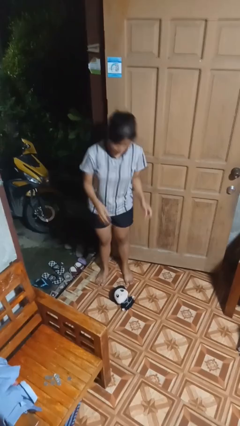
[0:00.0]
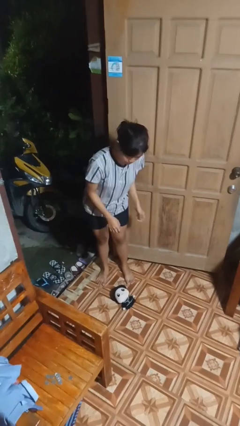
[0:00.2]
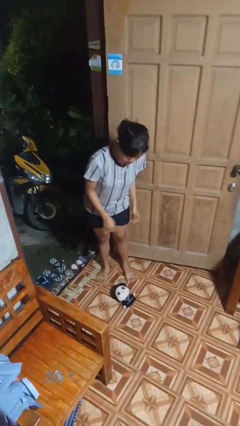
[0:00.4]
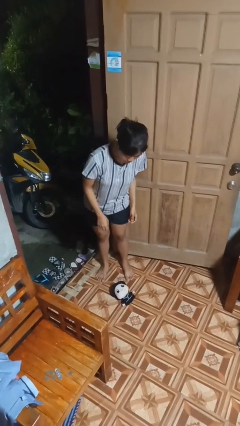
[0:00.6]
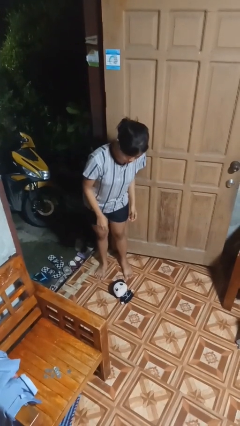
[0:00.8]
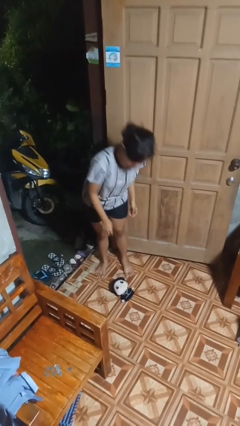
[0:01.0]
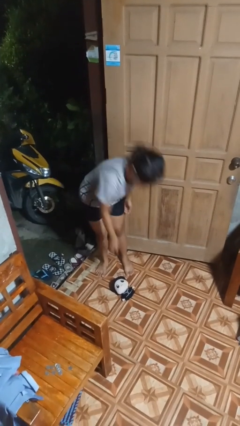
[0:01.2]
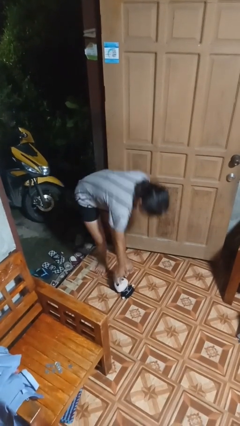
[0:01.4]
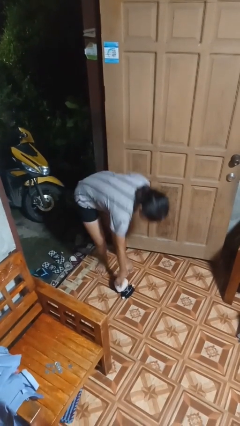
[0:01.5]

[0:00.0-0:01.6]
person picks up object from floor

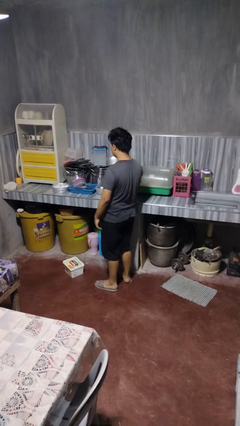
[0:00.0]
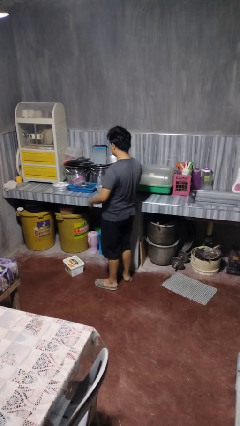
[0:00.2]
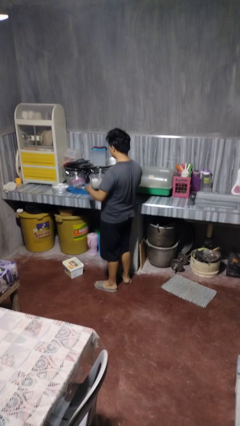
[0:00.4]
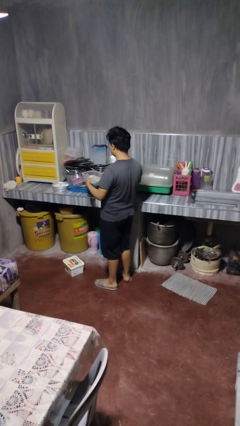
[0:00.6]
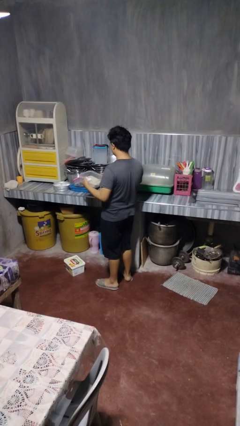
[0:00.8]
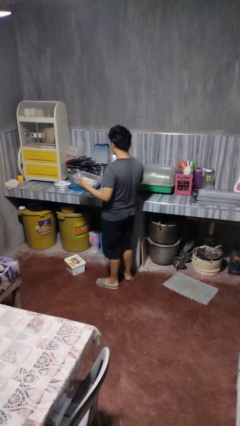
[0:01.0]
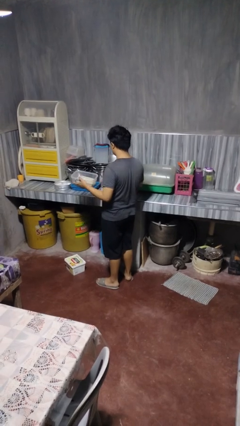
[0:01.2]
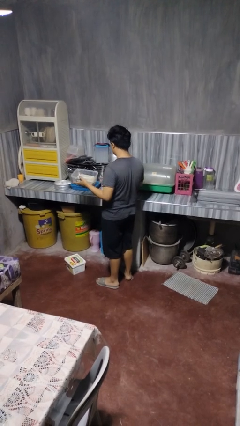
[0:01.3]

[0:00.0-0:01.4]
person picks up object from countertop

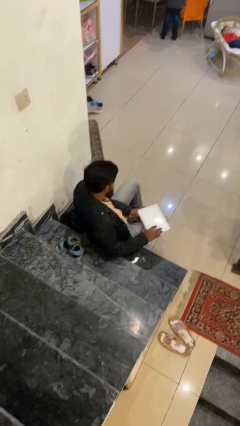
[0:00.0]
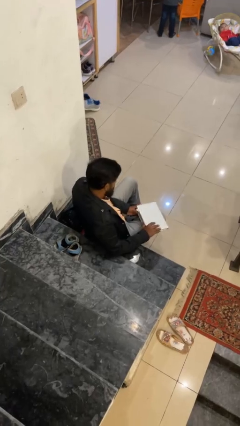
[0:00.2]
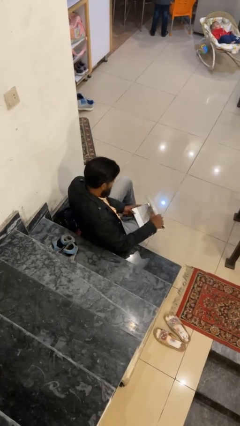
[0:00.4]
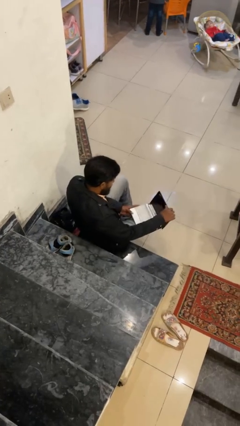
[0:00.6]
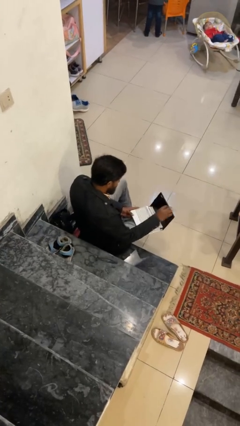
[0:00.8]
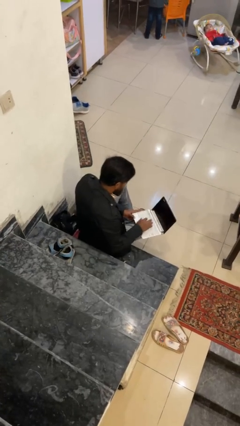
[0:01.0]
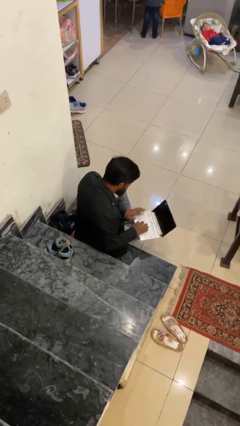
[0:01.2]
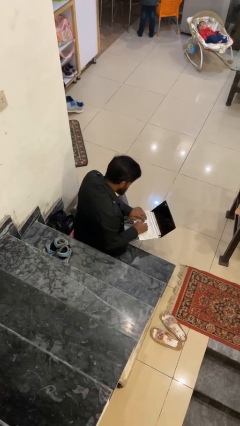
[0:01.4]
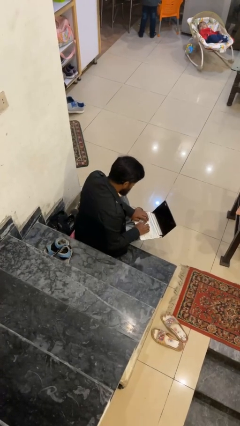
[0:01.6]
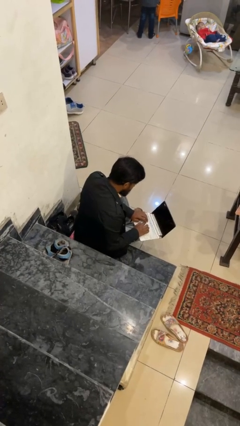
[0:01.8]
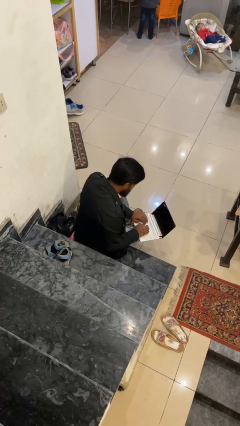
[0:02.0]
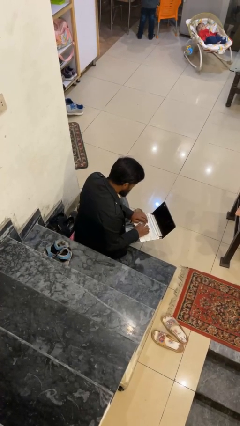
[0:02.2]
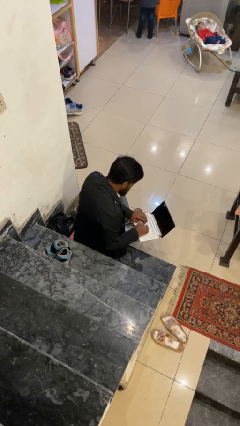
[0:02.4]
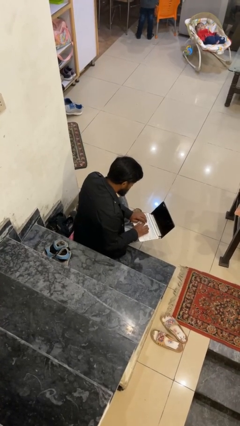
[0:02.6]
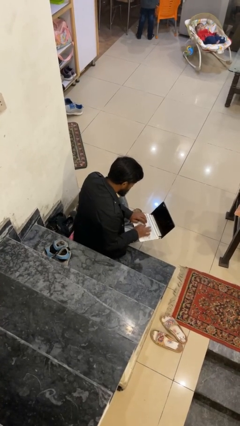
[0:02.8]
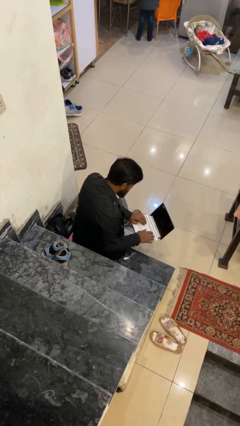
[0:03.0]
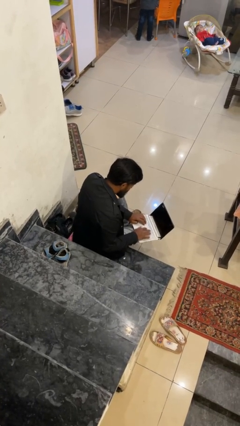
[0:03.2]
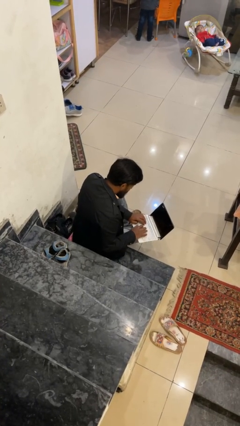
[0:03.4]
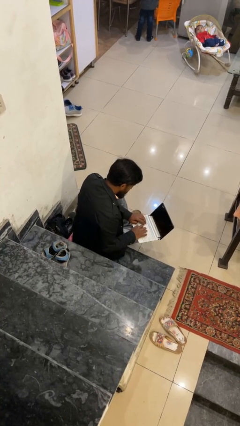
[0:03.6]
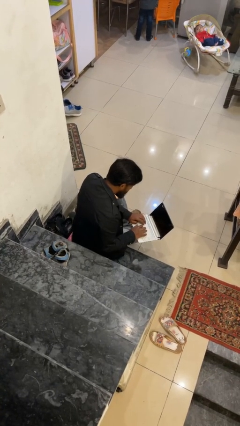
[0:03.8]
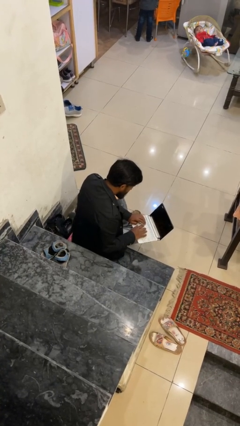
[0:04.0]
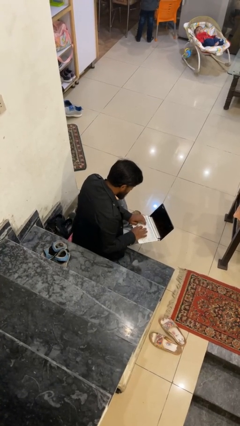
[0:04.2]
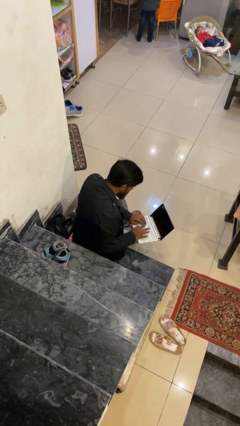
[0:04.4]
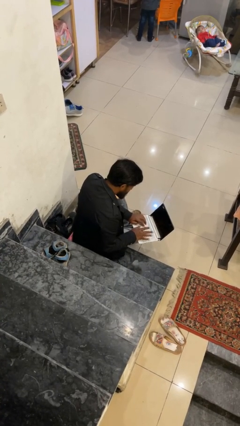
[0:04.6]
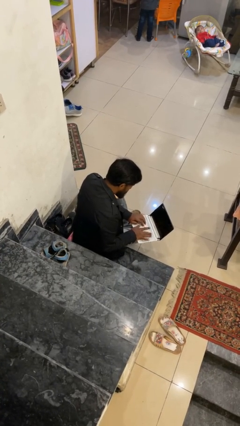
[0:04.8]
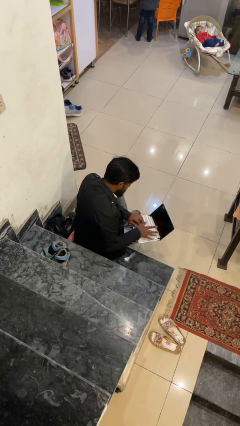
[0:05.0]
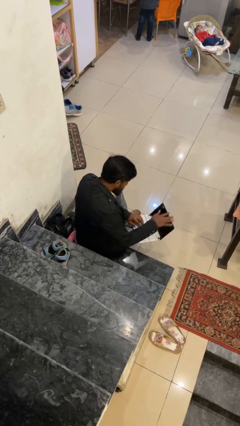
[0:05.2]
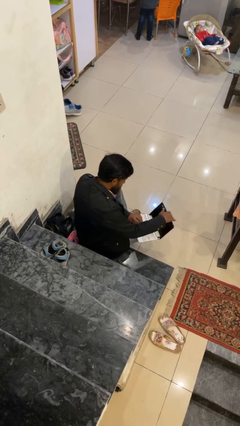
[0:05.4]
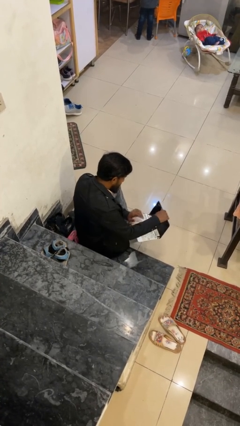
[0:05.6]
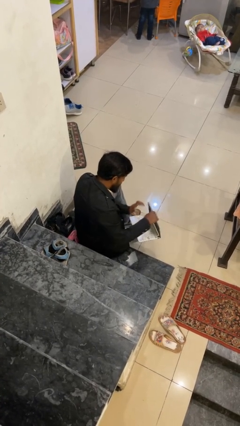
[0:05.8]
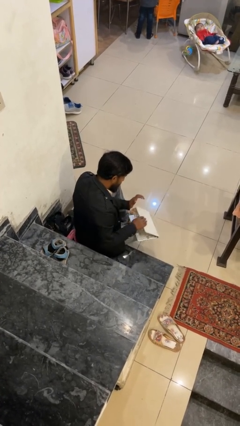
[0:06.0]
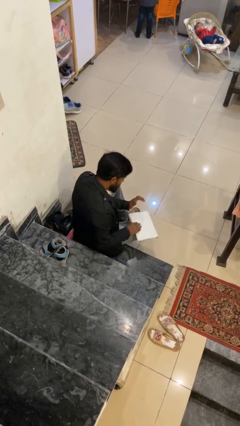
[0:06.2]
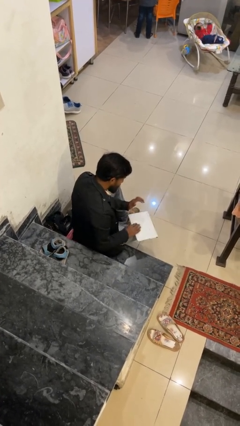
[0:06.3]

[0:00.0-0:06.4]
person interacts with laptop

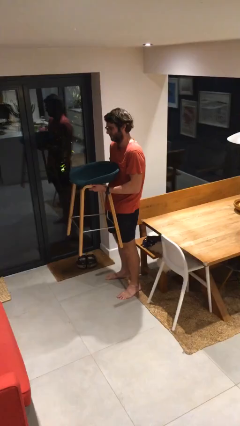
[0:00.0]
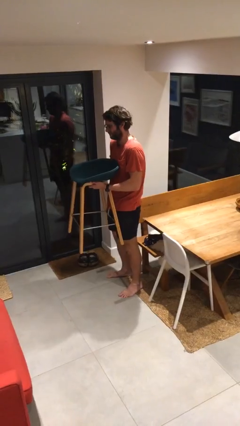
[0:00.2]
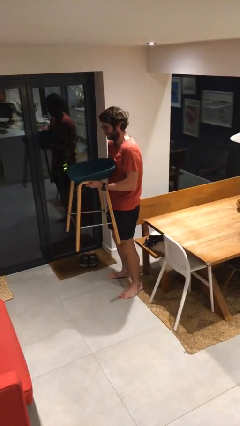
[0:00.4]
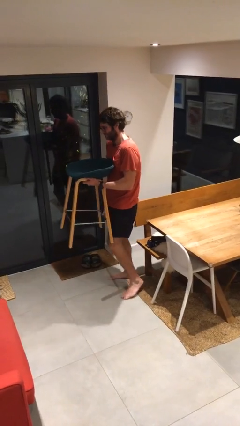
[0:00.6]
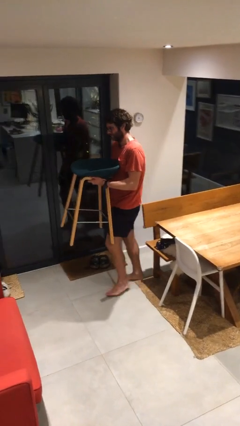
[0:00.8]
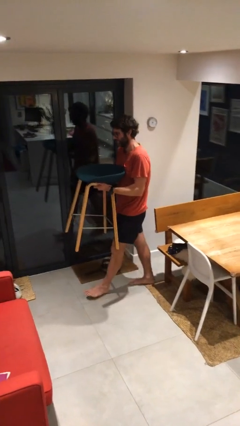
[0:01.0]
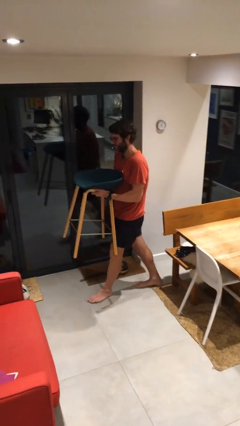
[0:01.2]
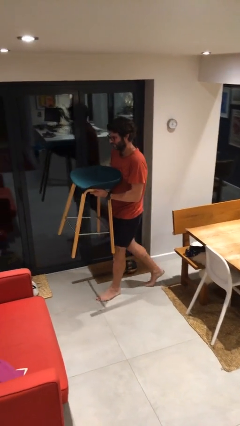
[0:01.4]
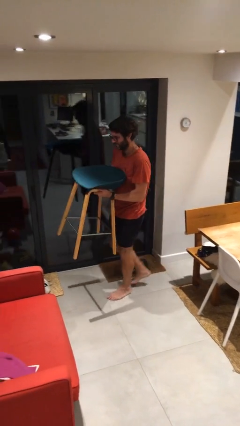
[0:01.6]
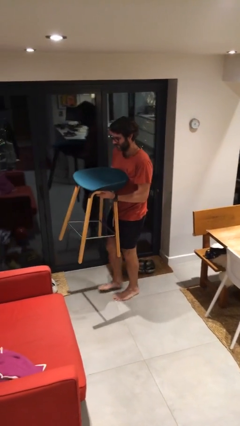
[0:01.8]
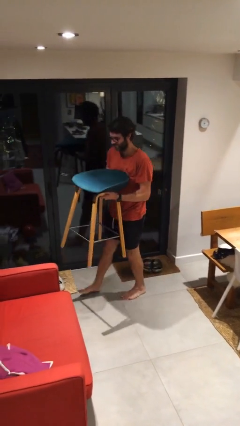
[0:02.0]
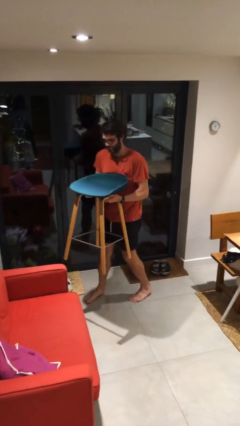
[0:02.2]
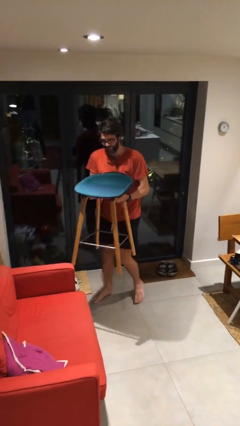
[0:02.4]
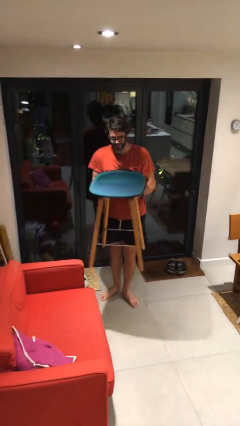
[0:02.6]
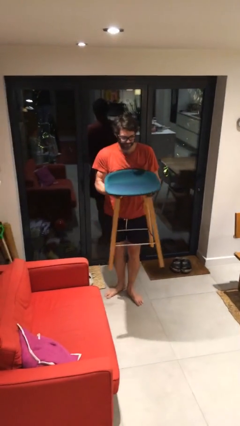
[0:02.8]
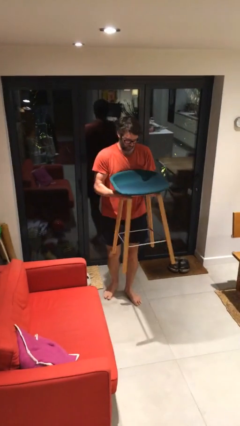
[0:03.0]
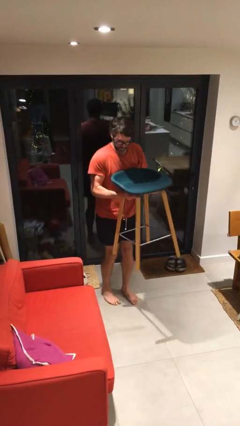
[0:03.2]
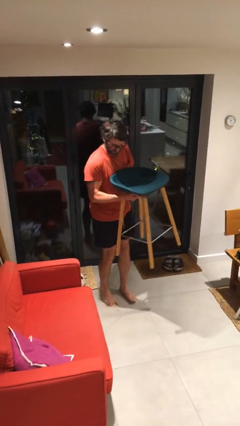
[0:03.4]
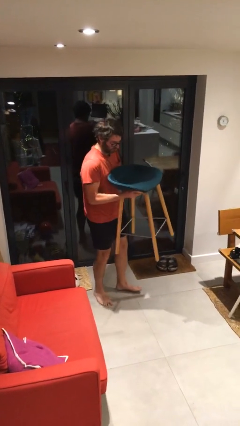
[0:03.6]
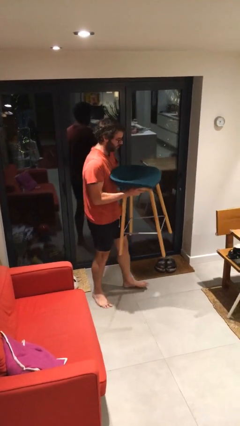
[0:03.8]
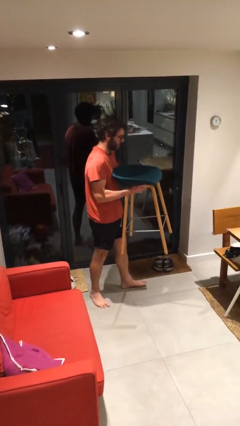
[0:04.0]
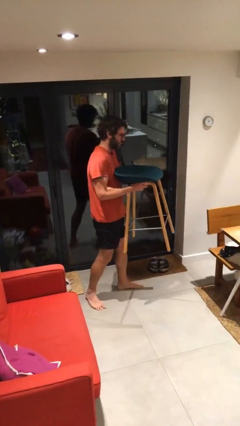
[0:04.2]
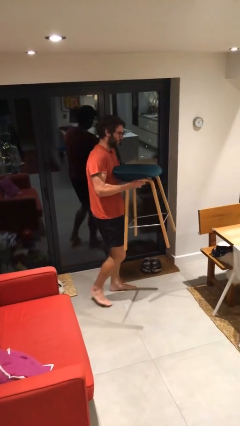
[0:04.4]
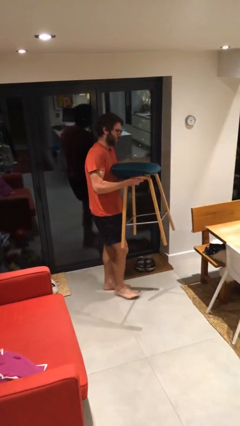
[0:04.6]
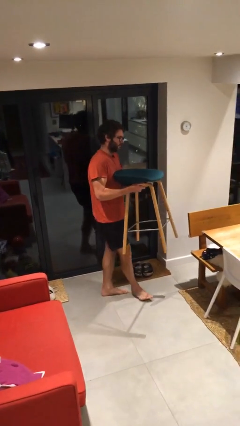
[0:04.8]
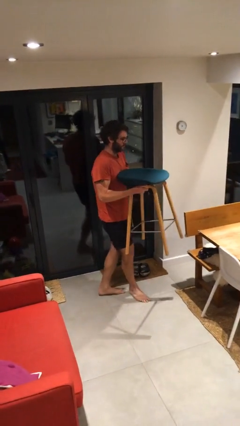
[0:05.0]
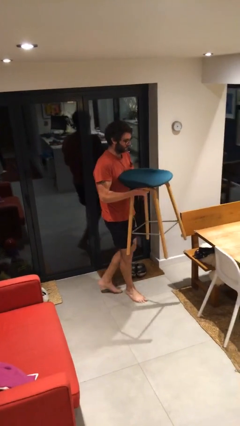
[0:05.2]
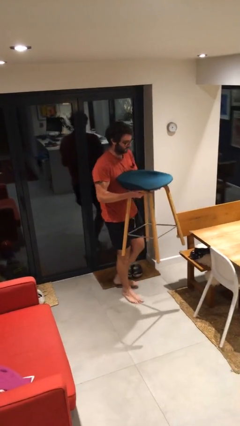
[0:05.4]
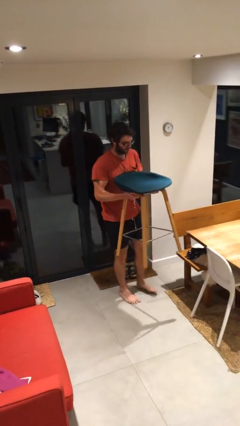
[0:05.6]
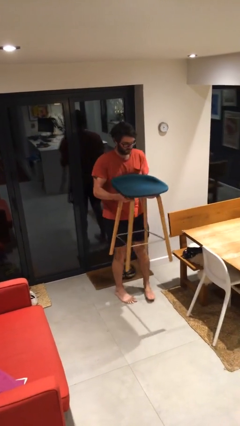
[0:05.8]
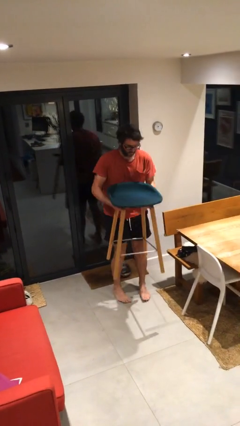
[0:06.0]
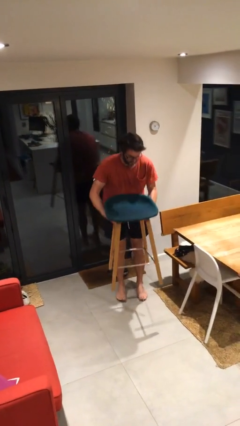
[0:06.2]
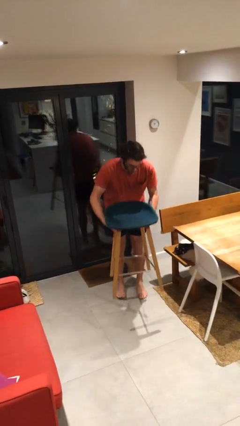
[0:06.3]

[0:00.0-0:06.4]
person carries heavy object

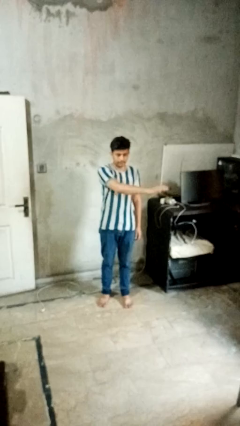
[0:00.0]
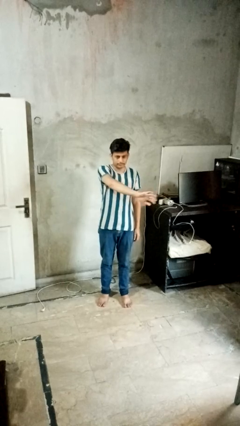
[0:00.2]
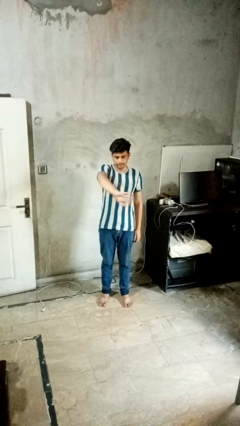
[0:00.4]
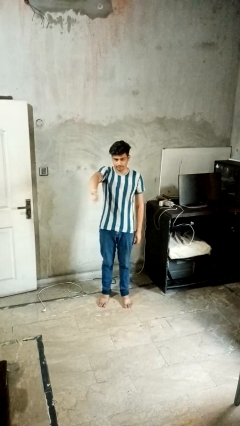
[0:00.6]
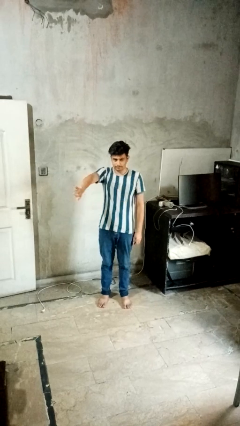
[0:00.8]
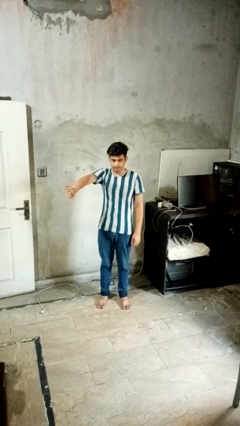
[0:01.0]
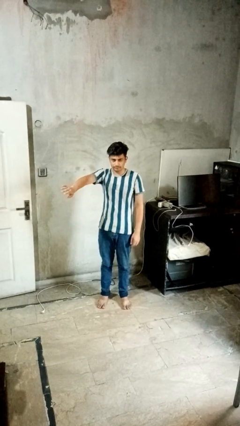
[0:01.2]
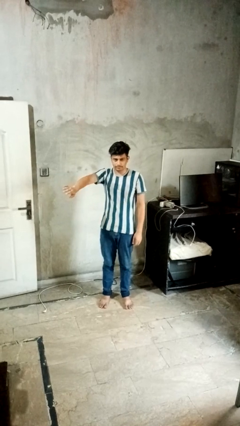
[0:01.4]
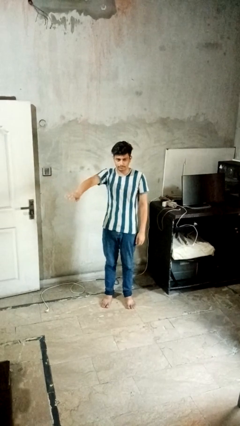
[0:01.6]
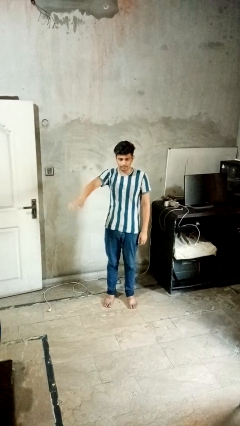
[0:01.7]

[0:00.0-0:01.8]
person gestures swipe right

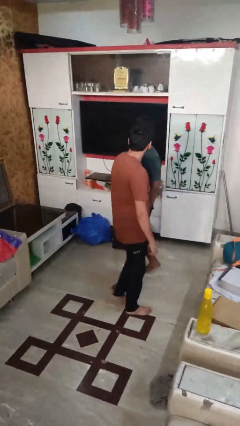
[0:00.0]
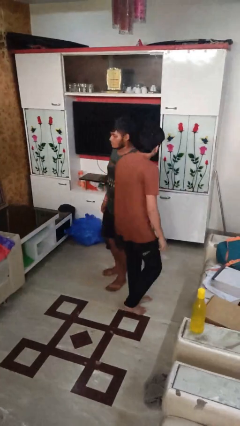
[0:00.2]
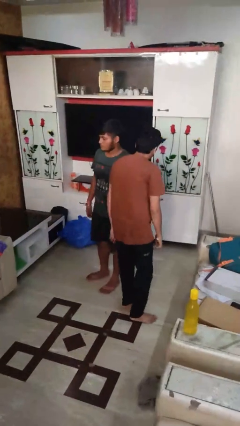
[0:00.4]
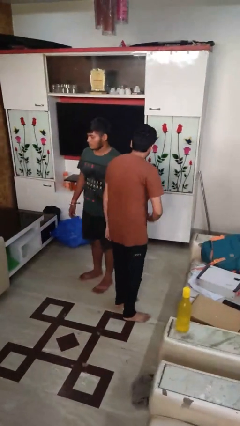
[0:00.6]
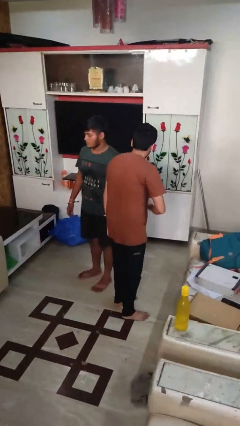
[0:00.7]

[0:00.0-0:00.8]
person bumps into person
